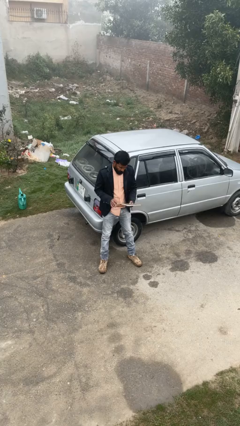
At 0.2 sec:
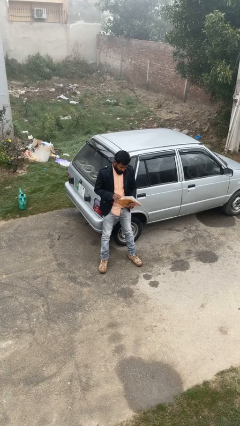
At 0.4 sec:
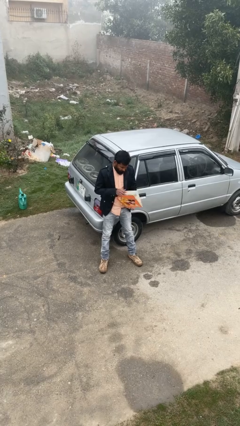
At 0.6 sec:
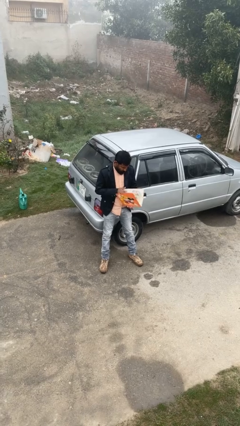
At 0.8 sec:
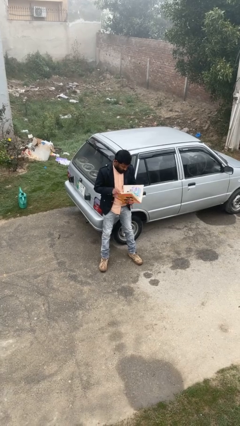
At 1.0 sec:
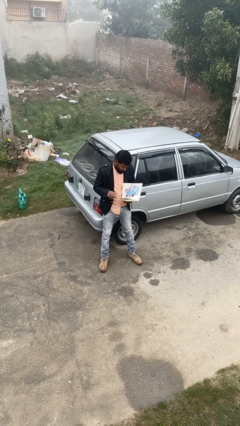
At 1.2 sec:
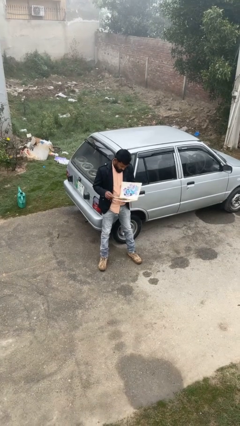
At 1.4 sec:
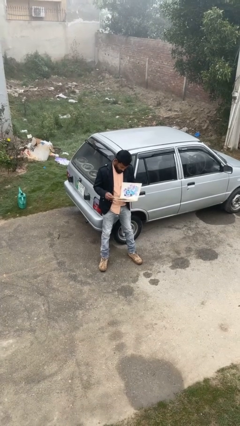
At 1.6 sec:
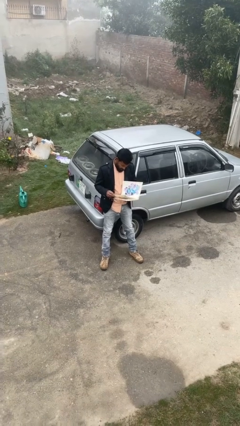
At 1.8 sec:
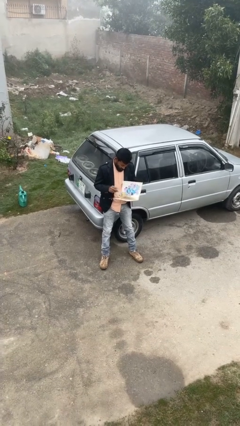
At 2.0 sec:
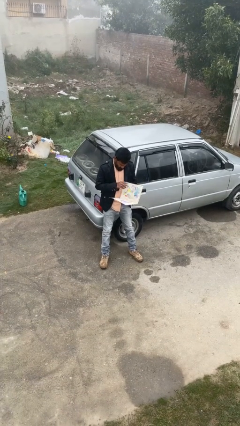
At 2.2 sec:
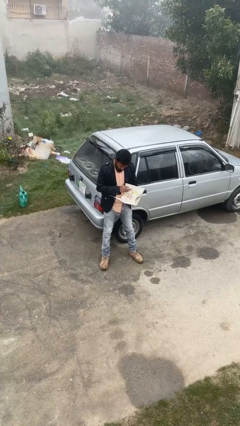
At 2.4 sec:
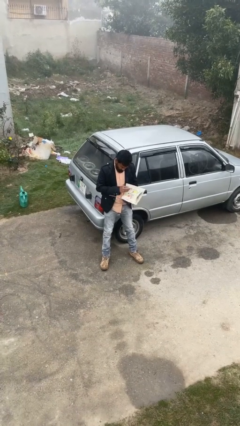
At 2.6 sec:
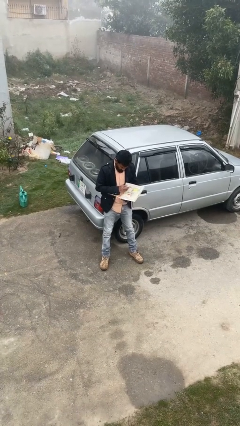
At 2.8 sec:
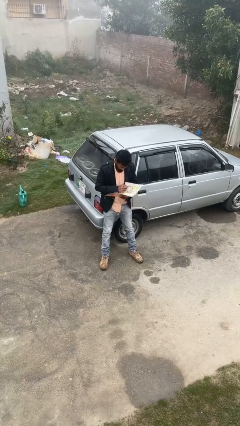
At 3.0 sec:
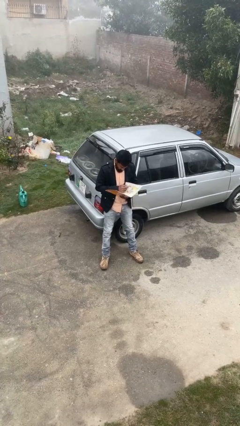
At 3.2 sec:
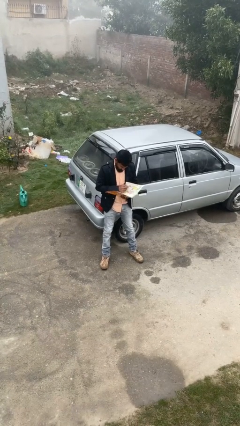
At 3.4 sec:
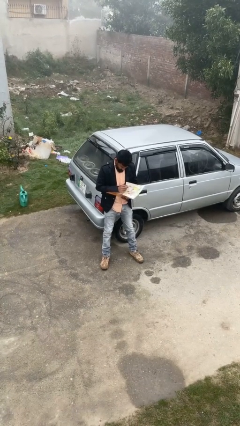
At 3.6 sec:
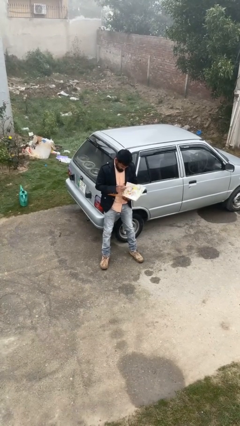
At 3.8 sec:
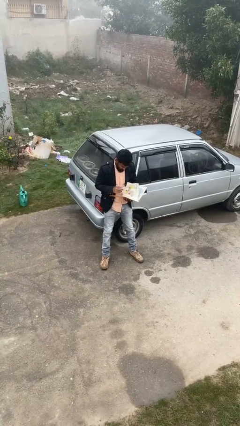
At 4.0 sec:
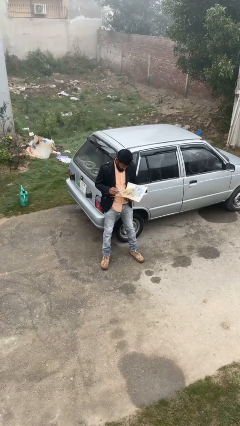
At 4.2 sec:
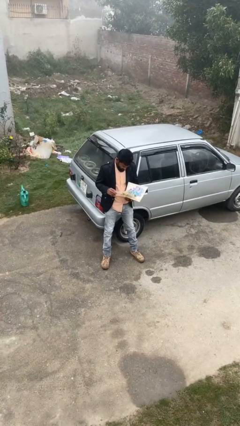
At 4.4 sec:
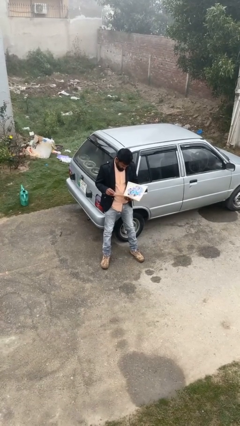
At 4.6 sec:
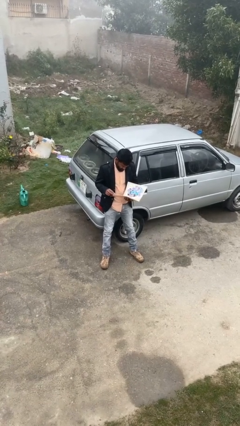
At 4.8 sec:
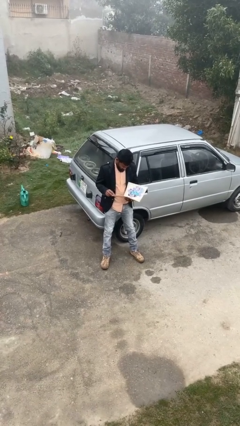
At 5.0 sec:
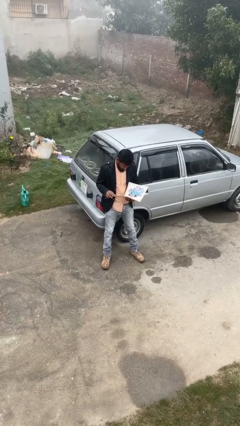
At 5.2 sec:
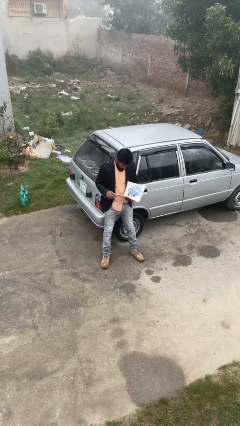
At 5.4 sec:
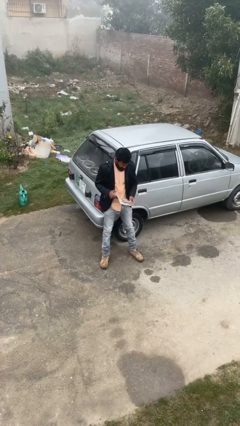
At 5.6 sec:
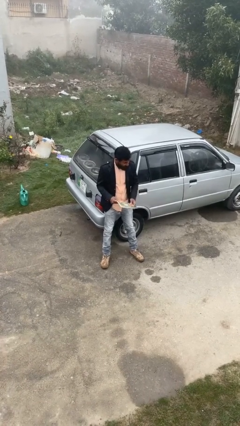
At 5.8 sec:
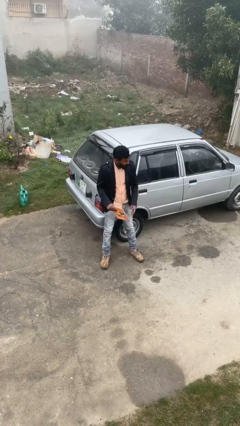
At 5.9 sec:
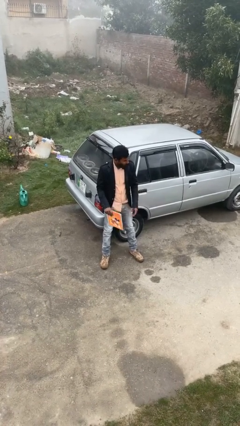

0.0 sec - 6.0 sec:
person reads document

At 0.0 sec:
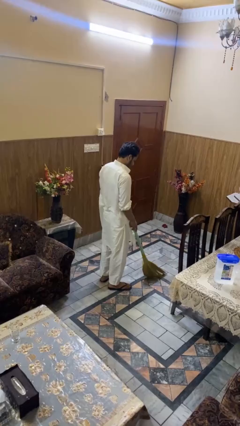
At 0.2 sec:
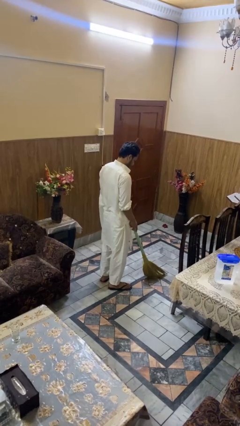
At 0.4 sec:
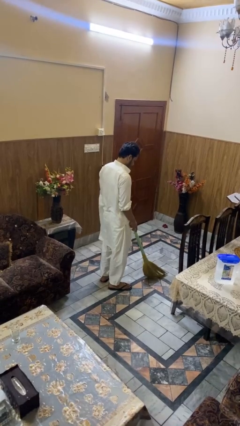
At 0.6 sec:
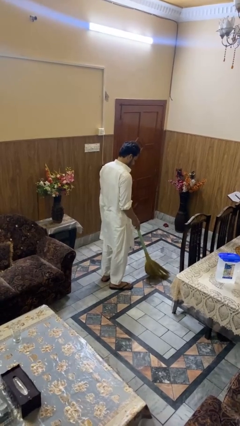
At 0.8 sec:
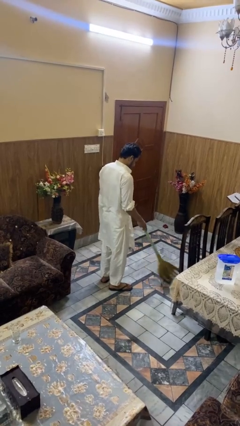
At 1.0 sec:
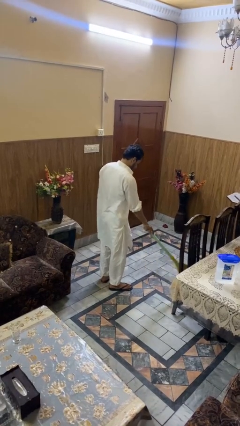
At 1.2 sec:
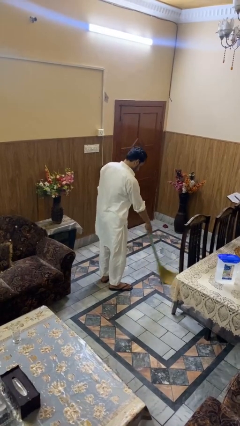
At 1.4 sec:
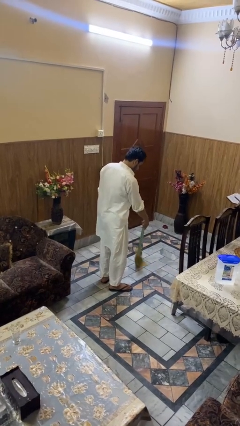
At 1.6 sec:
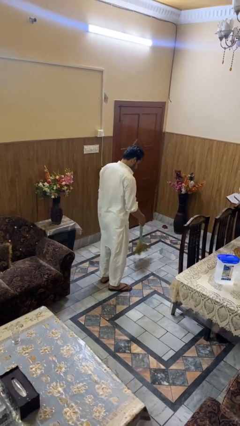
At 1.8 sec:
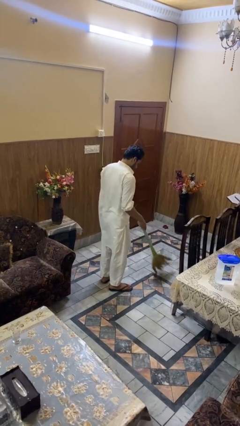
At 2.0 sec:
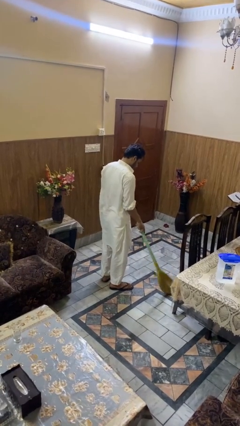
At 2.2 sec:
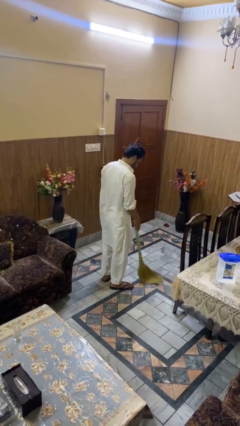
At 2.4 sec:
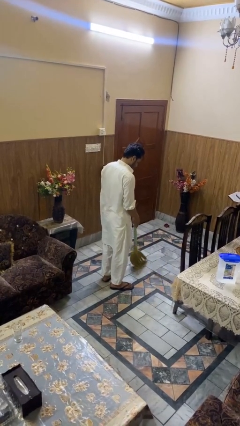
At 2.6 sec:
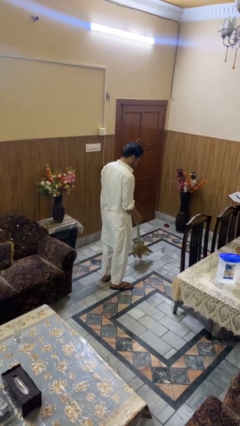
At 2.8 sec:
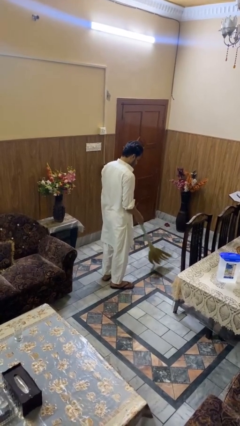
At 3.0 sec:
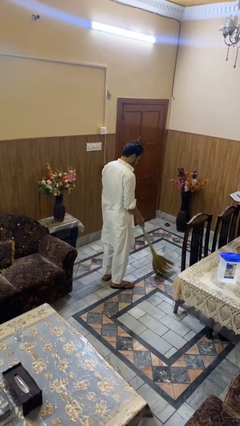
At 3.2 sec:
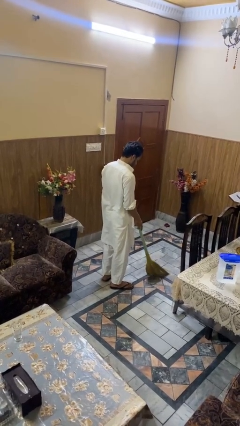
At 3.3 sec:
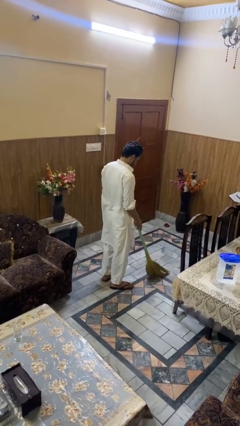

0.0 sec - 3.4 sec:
person sweeps floor

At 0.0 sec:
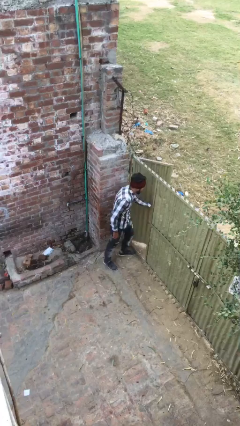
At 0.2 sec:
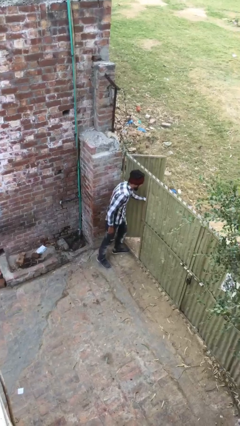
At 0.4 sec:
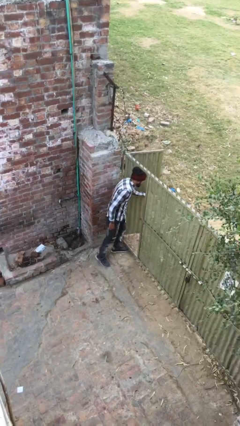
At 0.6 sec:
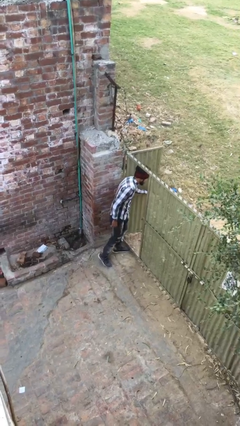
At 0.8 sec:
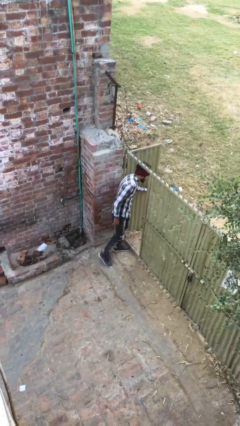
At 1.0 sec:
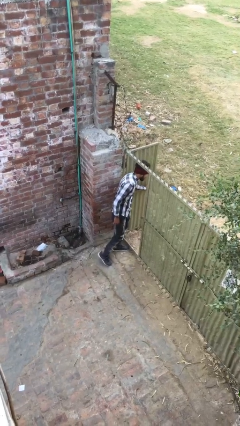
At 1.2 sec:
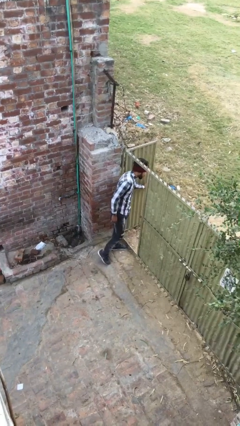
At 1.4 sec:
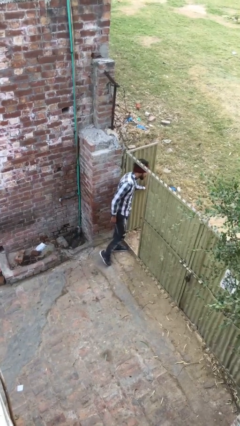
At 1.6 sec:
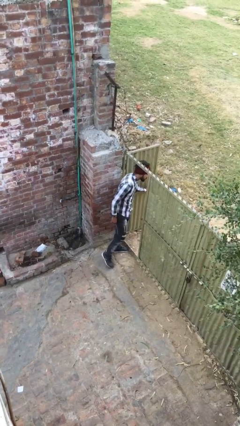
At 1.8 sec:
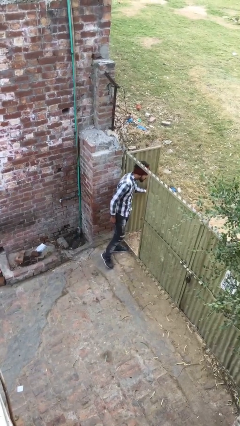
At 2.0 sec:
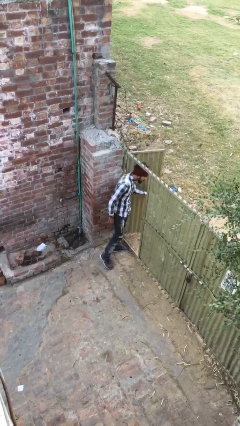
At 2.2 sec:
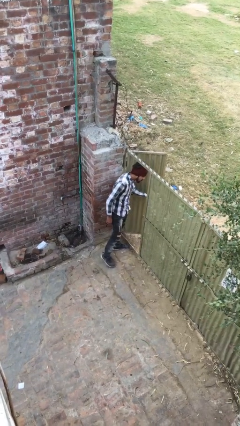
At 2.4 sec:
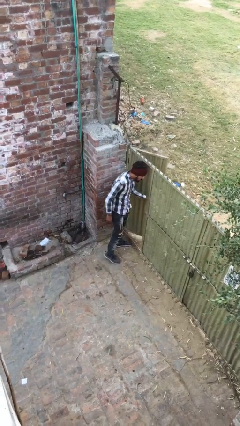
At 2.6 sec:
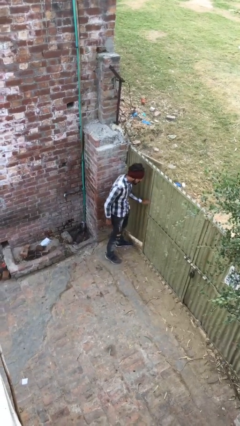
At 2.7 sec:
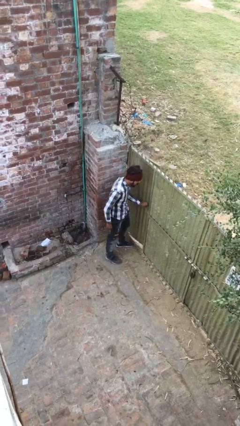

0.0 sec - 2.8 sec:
person opens facility door

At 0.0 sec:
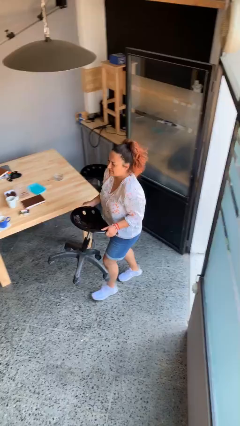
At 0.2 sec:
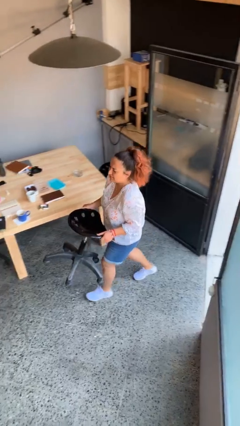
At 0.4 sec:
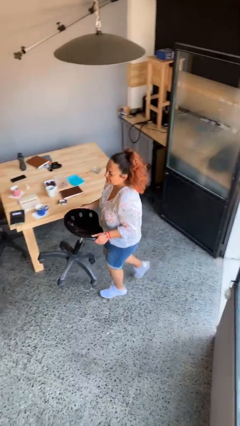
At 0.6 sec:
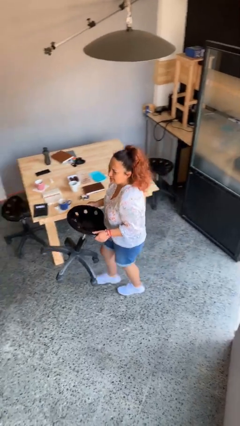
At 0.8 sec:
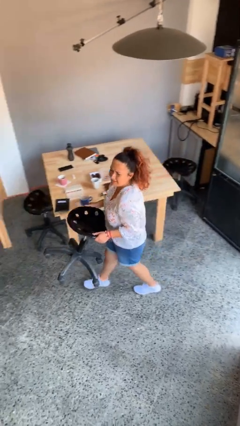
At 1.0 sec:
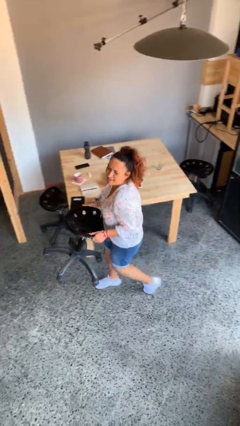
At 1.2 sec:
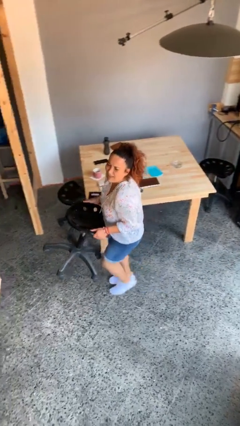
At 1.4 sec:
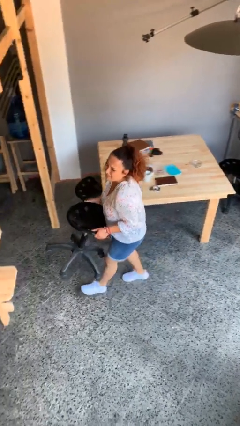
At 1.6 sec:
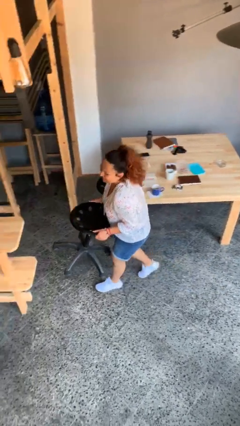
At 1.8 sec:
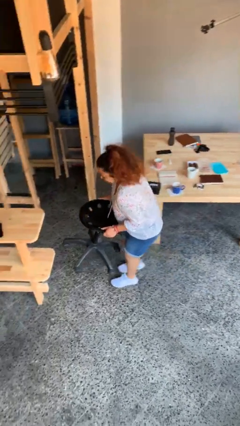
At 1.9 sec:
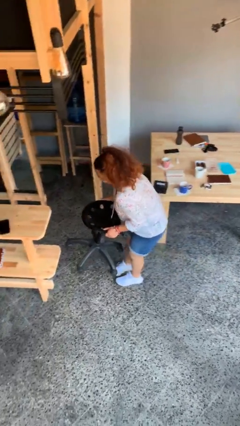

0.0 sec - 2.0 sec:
person carries heavy object

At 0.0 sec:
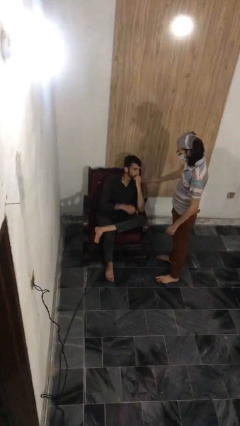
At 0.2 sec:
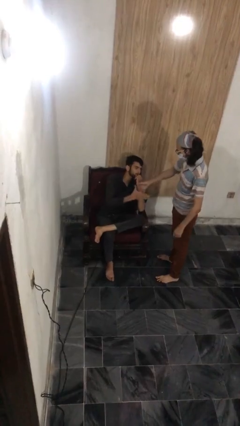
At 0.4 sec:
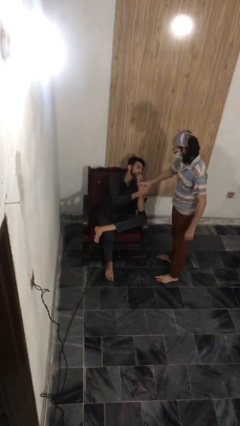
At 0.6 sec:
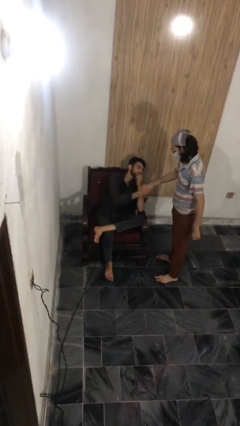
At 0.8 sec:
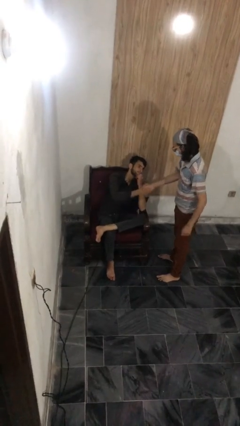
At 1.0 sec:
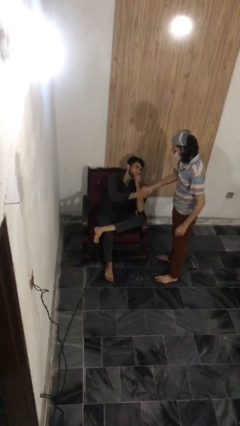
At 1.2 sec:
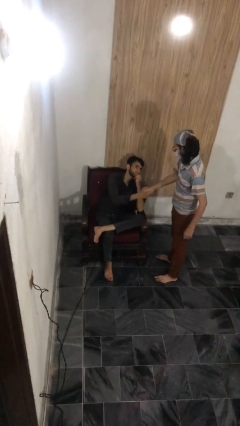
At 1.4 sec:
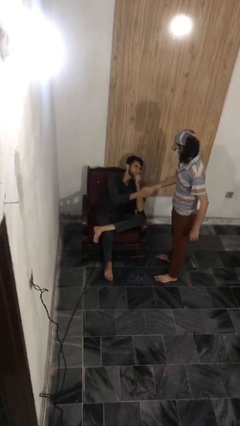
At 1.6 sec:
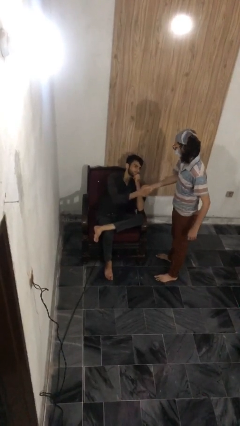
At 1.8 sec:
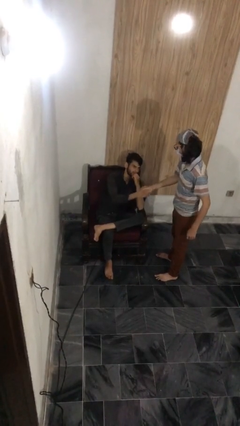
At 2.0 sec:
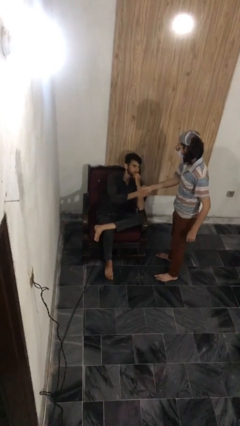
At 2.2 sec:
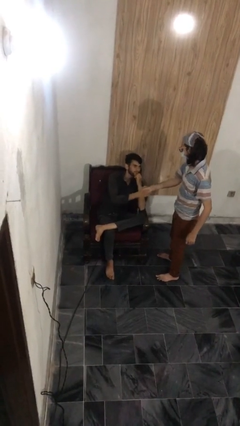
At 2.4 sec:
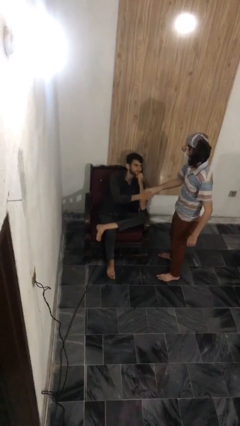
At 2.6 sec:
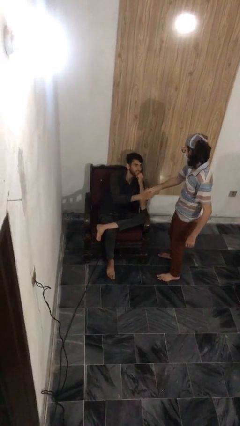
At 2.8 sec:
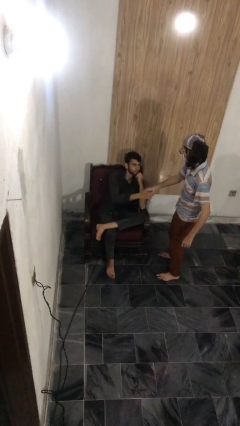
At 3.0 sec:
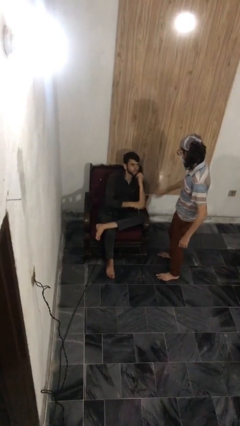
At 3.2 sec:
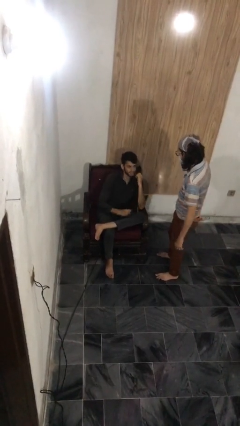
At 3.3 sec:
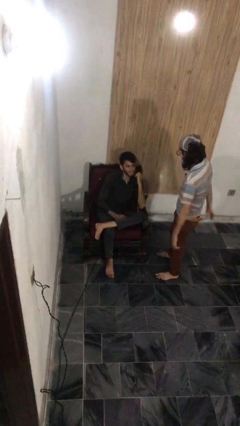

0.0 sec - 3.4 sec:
person shakes hand
